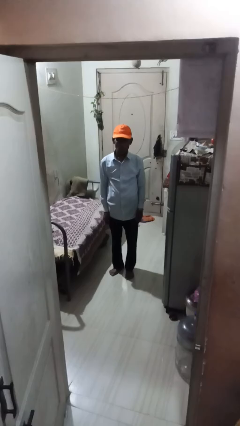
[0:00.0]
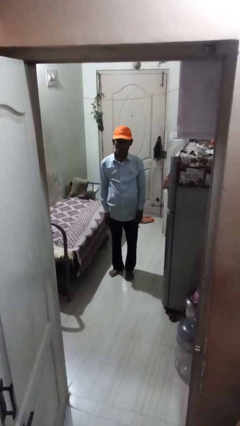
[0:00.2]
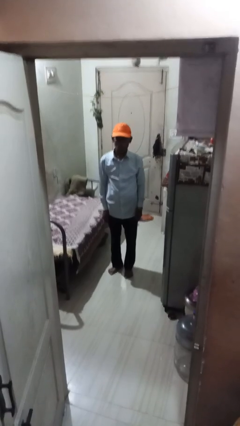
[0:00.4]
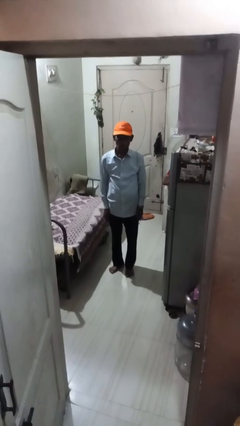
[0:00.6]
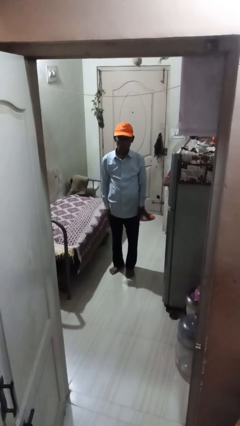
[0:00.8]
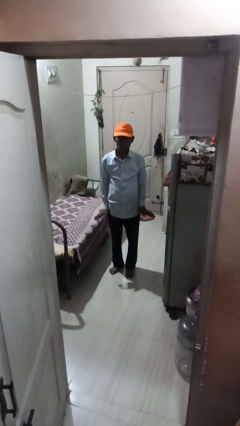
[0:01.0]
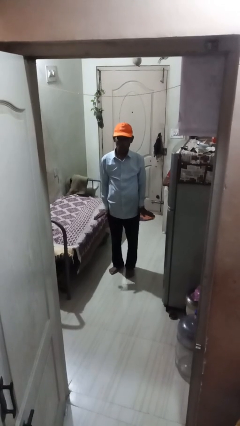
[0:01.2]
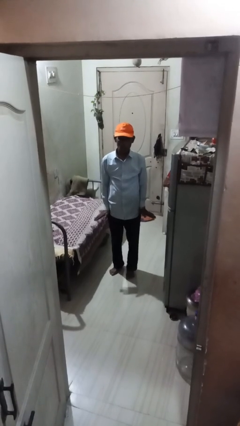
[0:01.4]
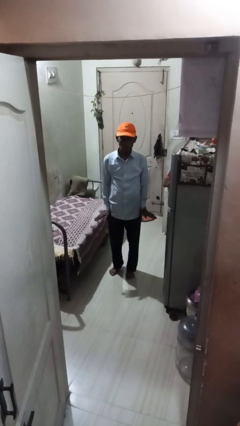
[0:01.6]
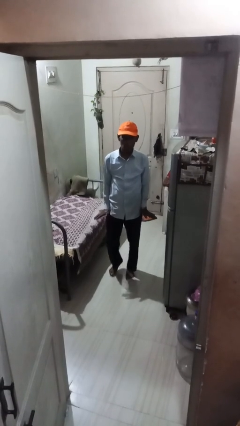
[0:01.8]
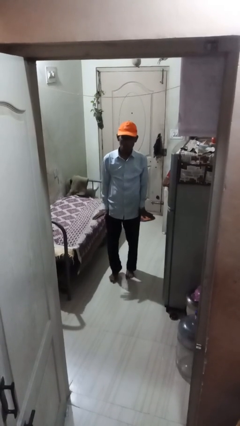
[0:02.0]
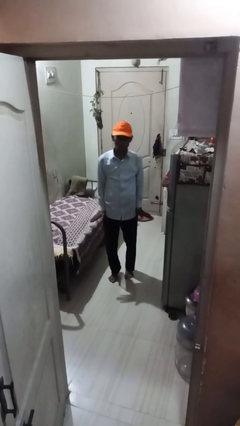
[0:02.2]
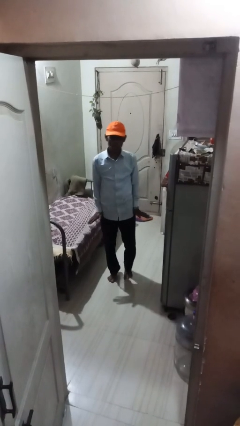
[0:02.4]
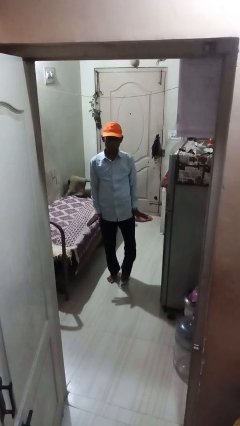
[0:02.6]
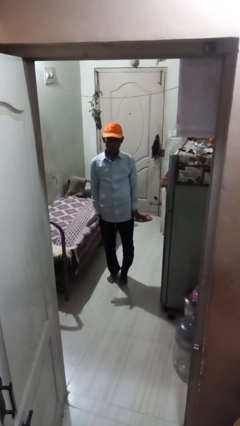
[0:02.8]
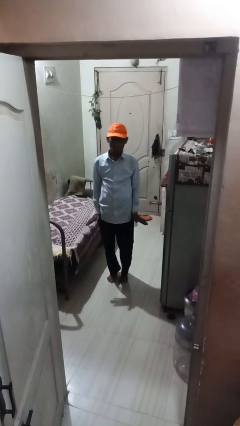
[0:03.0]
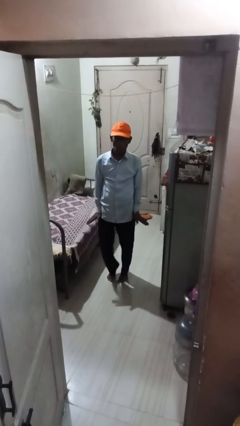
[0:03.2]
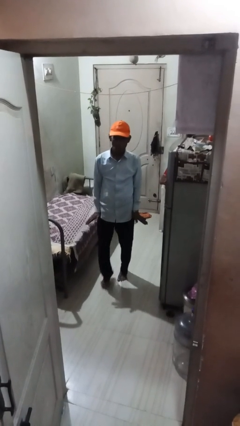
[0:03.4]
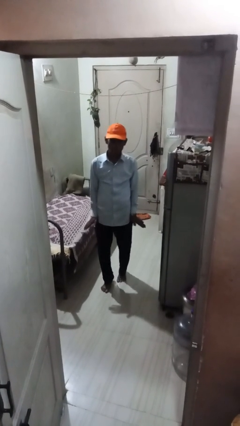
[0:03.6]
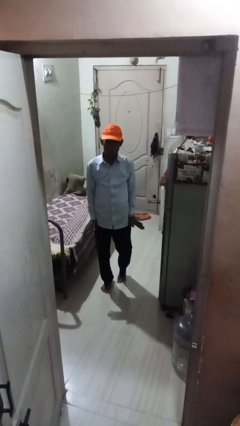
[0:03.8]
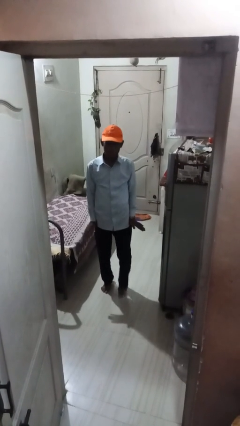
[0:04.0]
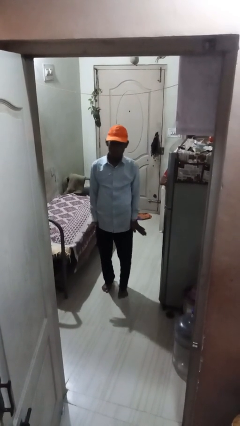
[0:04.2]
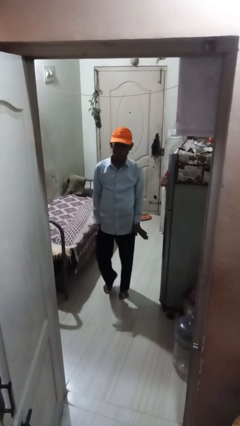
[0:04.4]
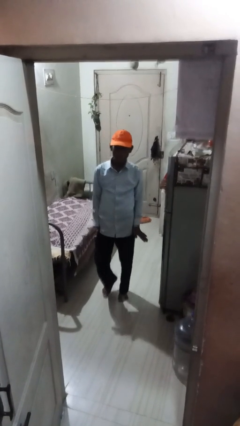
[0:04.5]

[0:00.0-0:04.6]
person walks tiptoe

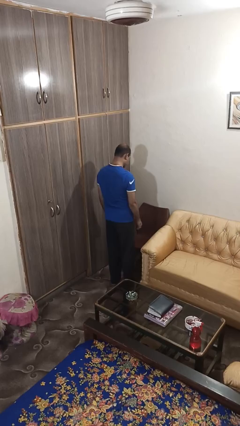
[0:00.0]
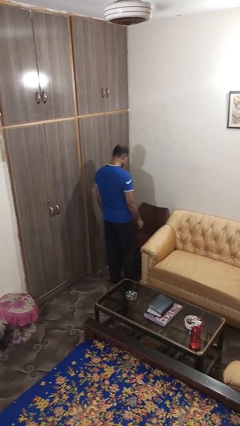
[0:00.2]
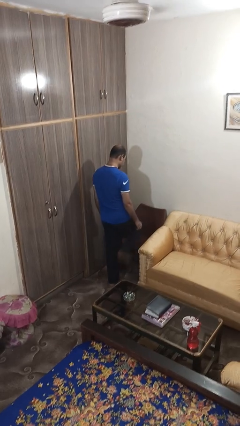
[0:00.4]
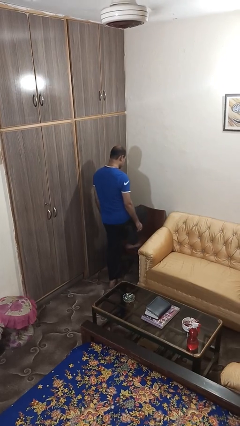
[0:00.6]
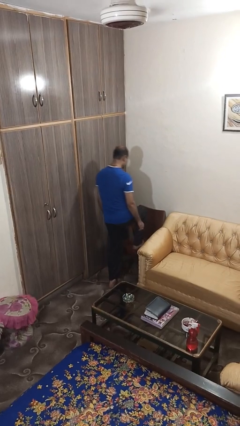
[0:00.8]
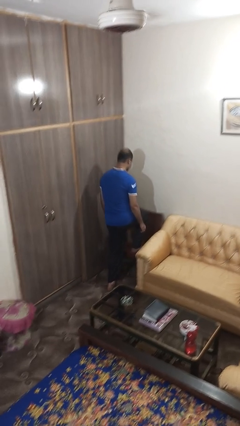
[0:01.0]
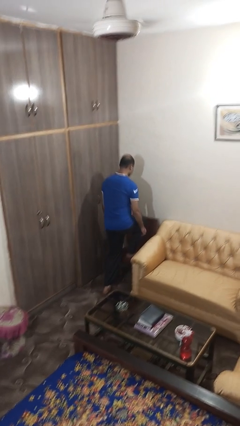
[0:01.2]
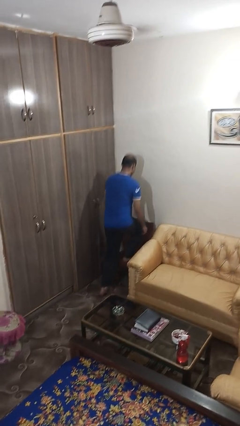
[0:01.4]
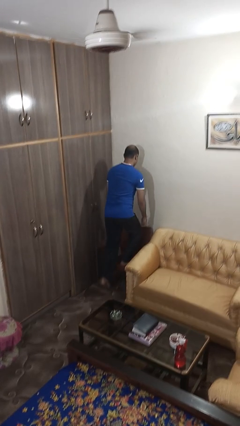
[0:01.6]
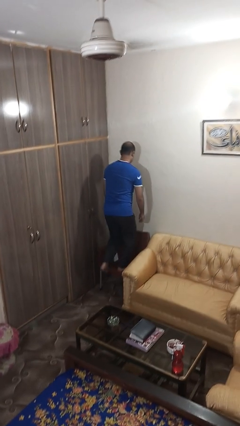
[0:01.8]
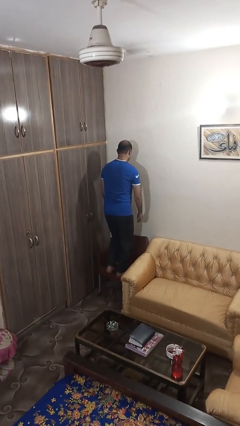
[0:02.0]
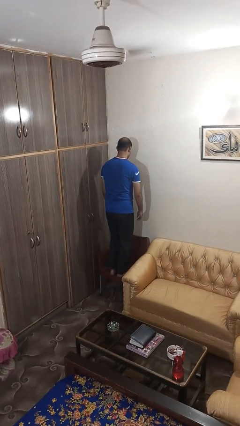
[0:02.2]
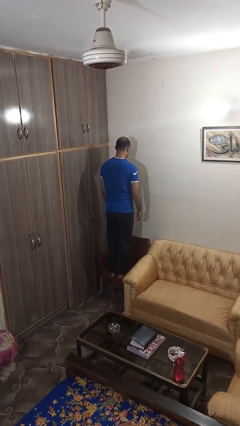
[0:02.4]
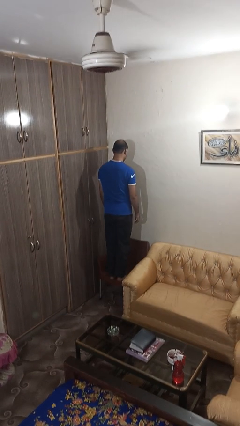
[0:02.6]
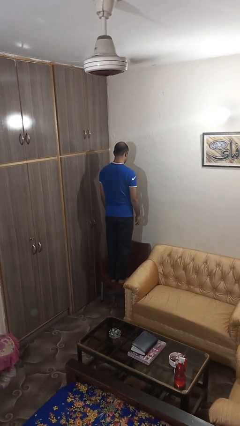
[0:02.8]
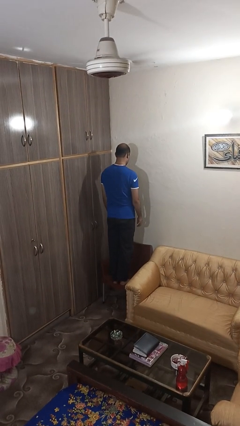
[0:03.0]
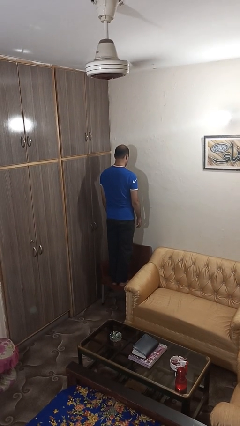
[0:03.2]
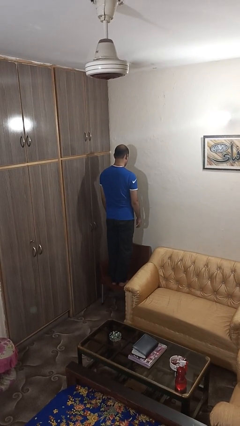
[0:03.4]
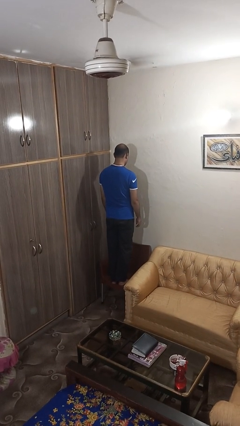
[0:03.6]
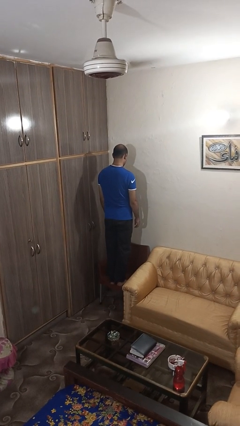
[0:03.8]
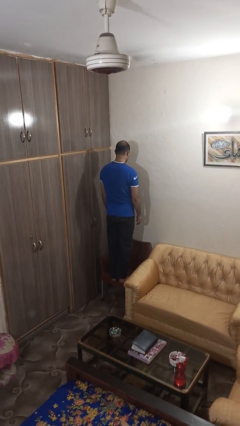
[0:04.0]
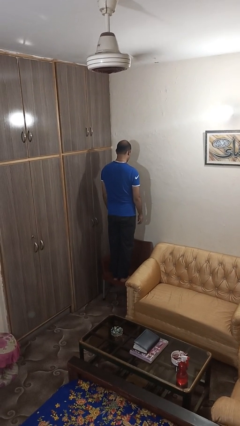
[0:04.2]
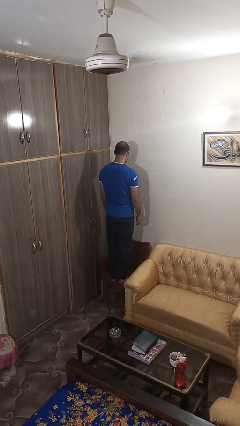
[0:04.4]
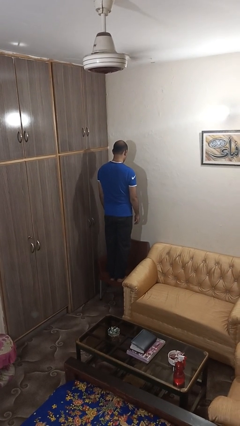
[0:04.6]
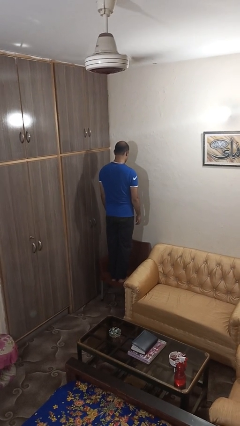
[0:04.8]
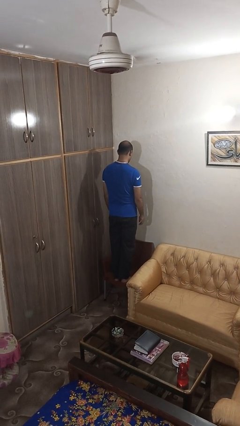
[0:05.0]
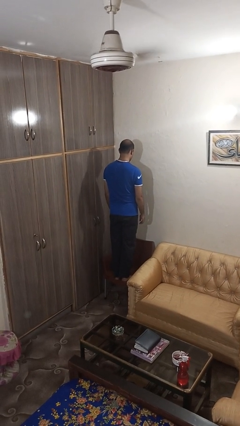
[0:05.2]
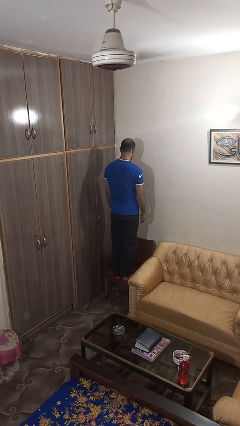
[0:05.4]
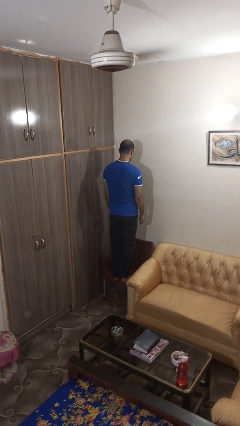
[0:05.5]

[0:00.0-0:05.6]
person climbs on chair

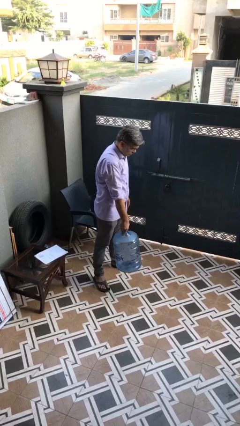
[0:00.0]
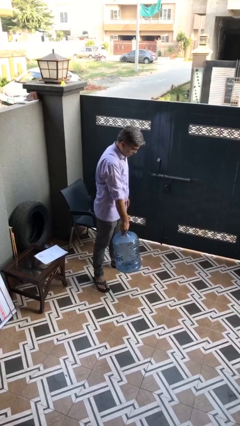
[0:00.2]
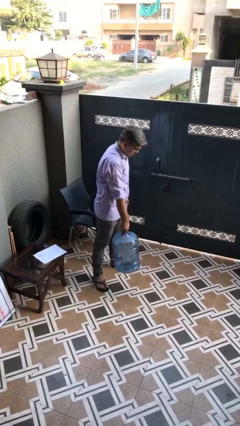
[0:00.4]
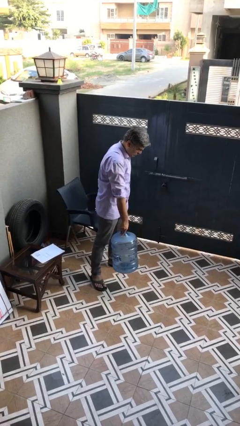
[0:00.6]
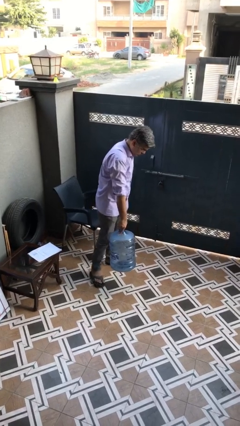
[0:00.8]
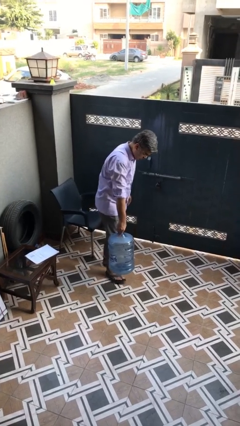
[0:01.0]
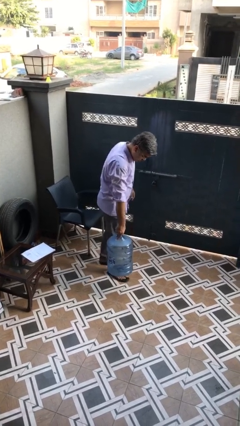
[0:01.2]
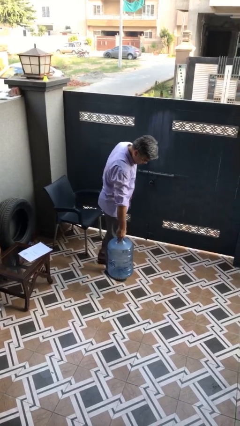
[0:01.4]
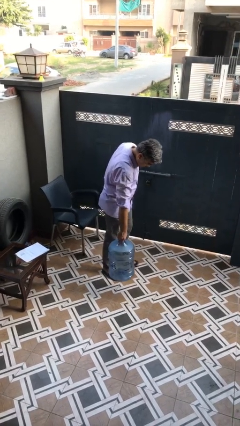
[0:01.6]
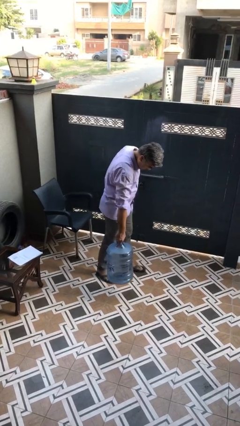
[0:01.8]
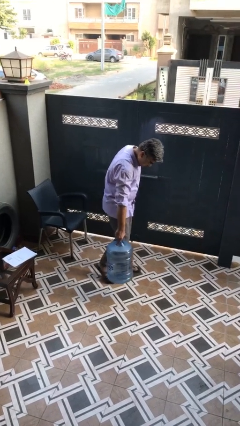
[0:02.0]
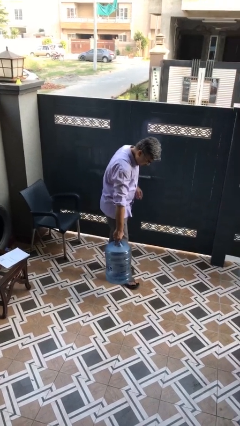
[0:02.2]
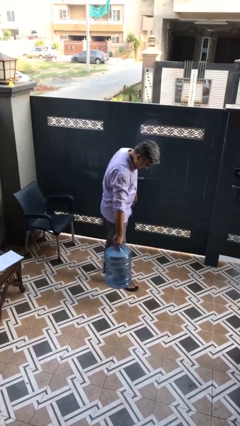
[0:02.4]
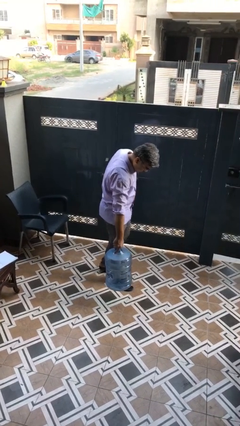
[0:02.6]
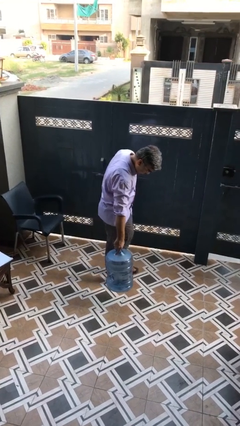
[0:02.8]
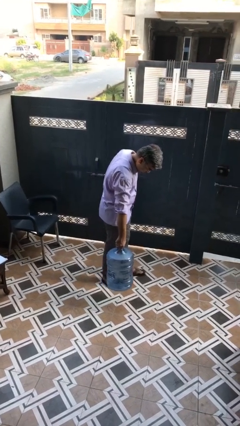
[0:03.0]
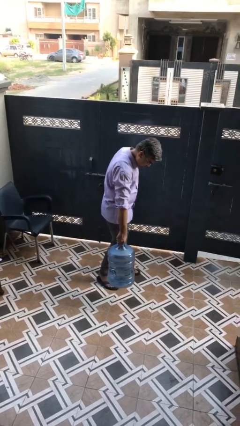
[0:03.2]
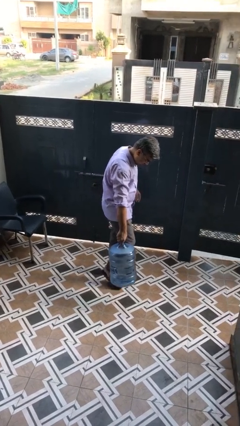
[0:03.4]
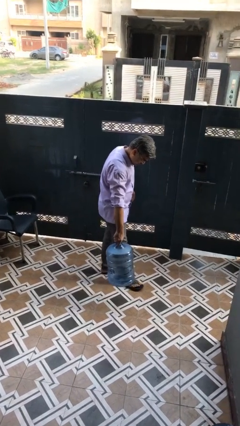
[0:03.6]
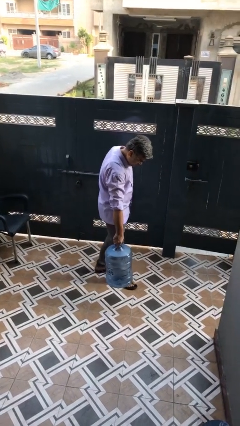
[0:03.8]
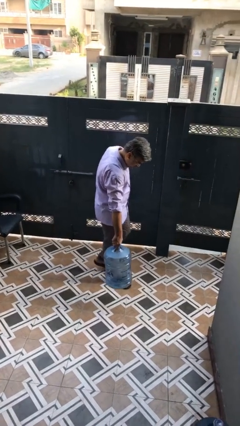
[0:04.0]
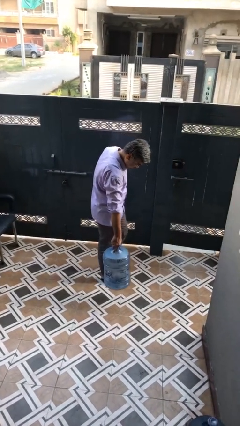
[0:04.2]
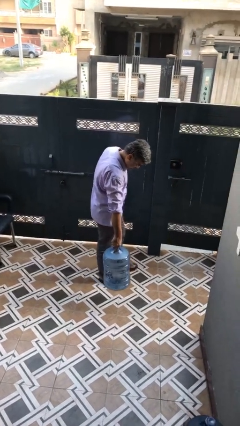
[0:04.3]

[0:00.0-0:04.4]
person carries heavy object

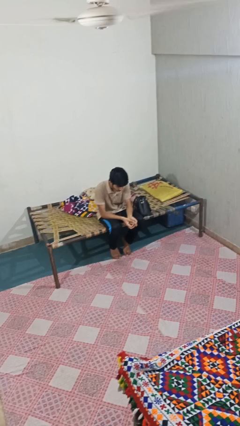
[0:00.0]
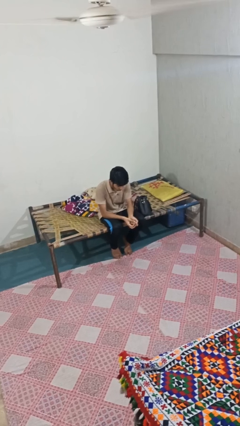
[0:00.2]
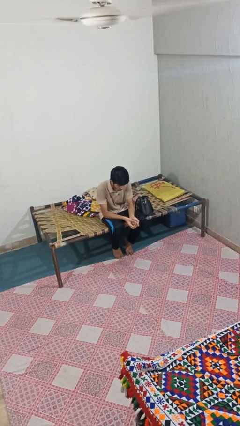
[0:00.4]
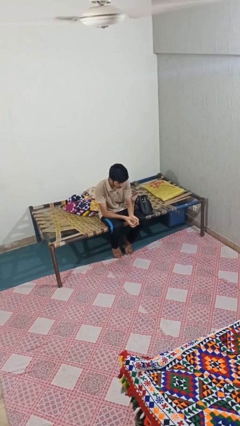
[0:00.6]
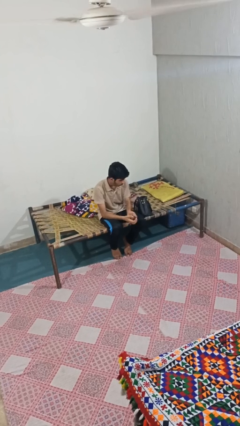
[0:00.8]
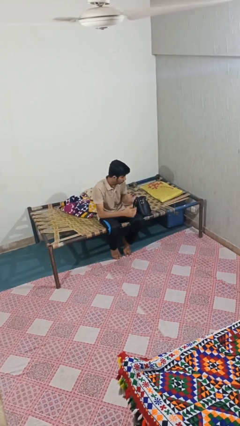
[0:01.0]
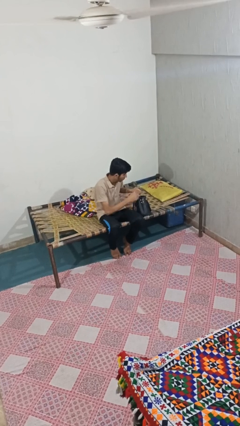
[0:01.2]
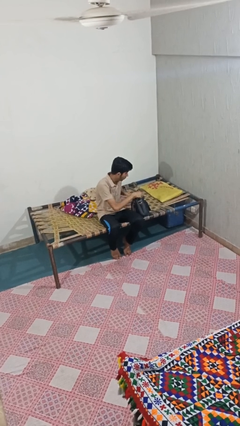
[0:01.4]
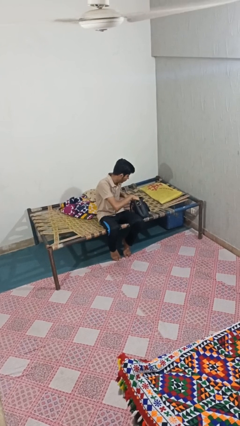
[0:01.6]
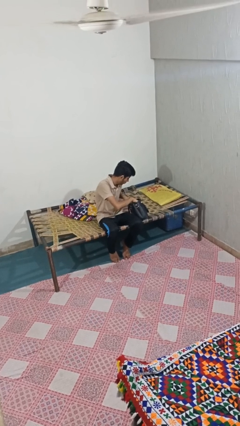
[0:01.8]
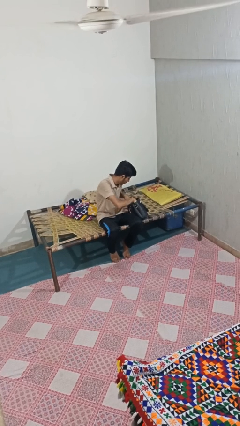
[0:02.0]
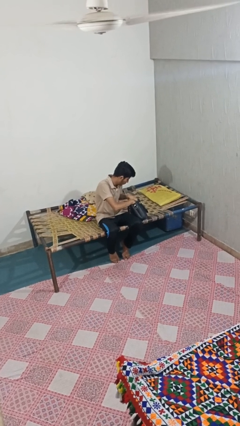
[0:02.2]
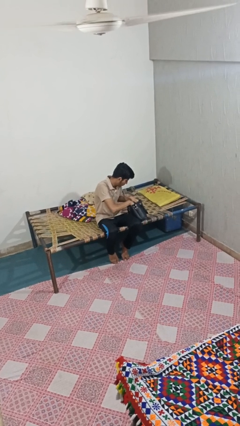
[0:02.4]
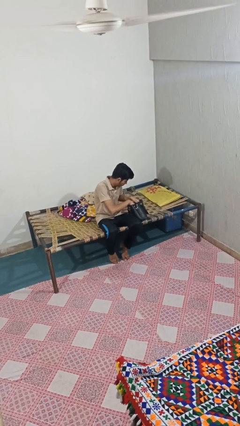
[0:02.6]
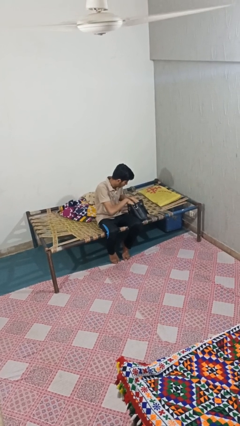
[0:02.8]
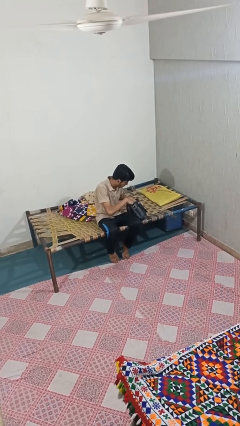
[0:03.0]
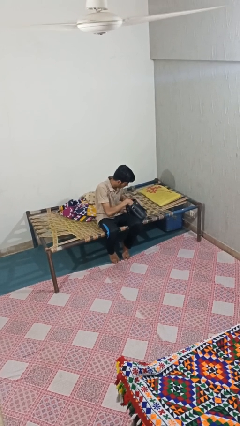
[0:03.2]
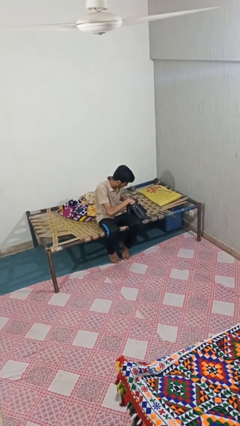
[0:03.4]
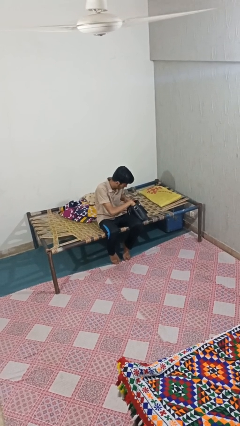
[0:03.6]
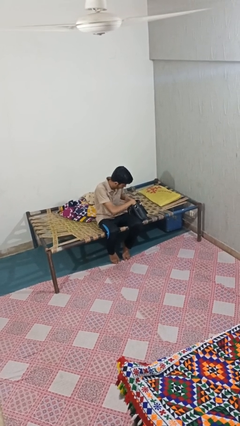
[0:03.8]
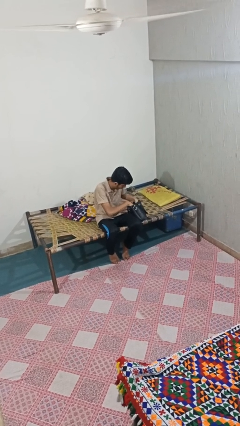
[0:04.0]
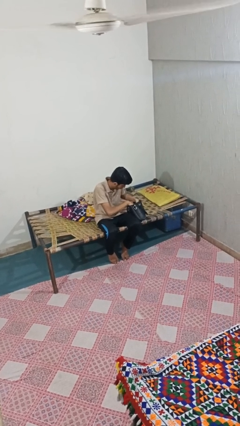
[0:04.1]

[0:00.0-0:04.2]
person searches in purse
